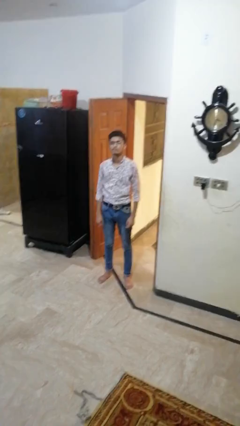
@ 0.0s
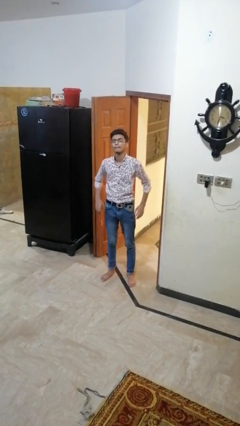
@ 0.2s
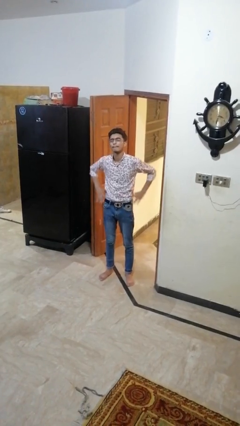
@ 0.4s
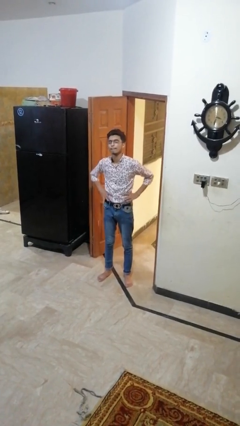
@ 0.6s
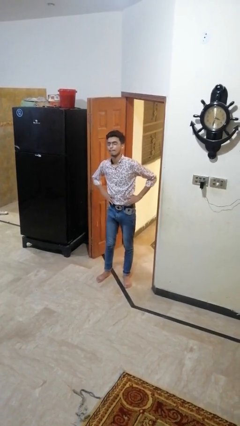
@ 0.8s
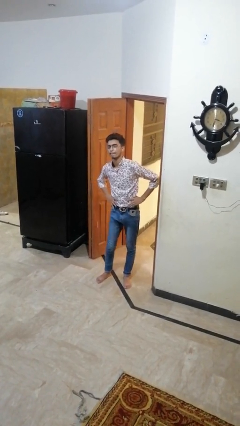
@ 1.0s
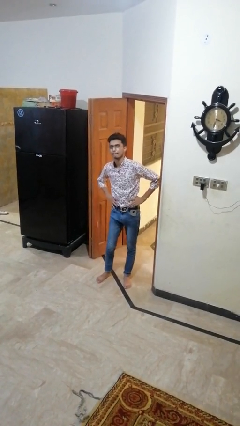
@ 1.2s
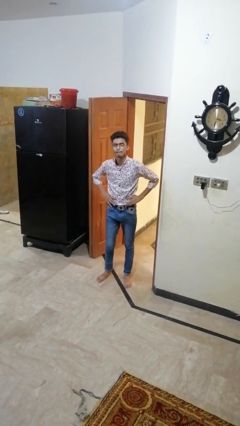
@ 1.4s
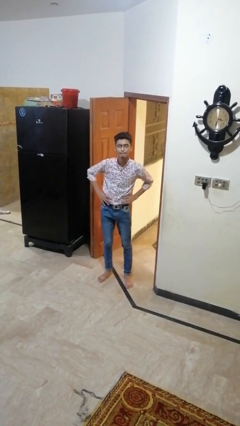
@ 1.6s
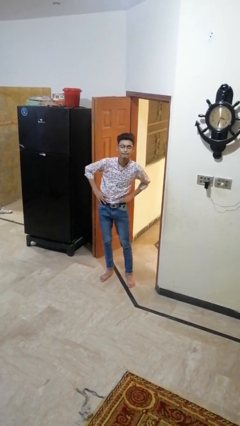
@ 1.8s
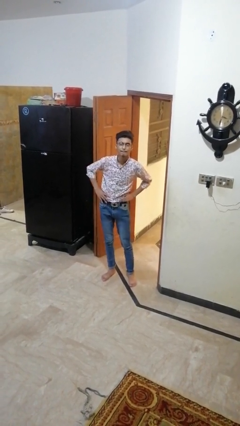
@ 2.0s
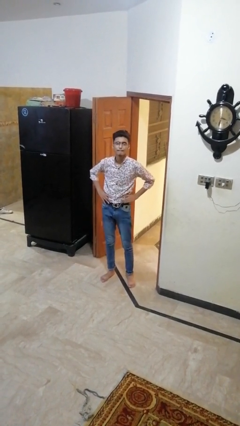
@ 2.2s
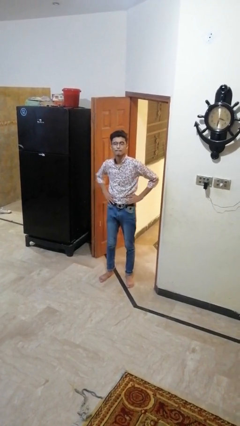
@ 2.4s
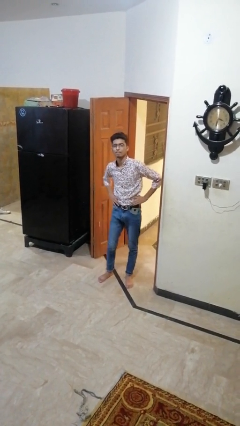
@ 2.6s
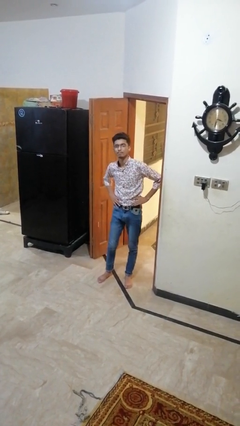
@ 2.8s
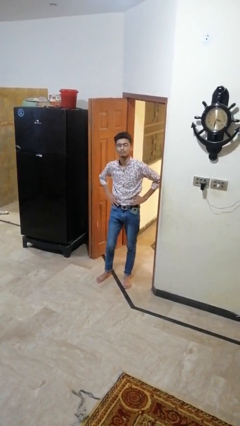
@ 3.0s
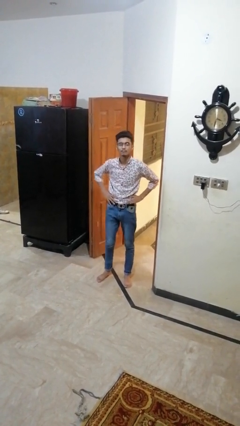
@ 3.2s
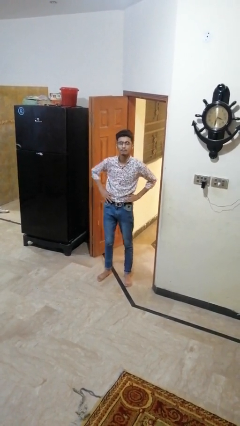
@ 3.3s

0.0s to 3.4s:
person wiggles hips

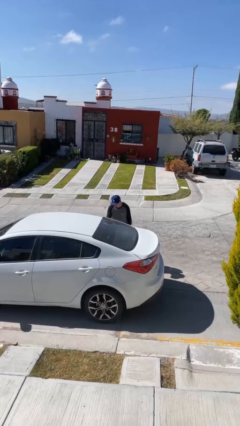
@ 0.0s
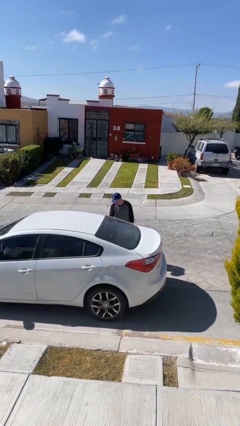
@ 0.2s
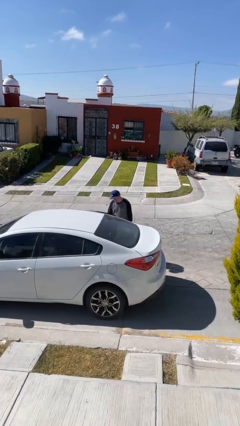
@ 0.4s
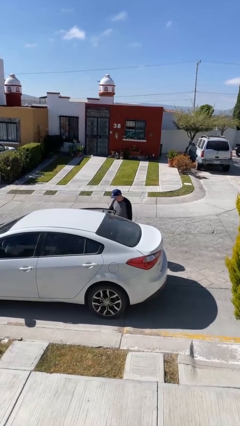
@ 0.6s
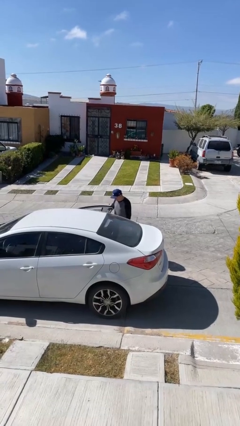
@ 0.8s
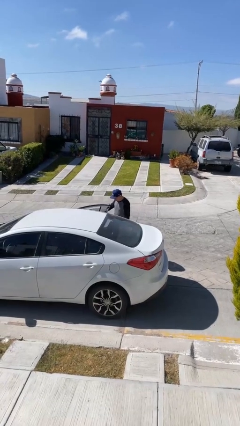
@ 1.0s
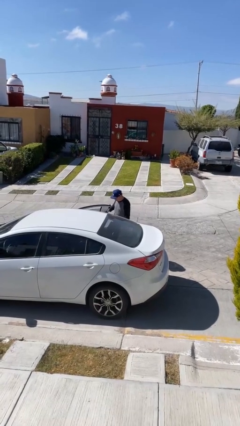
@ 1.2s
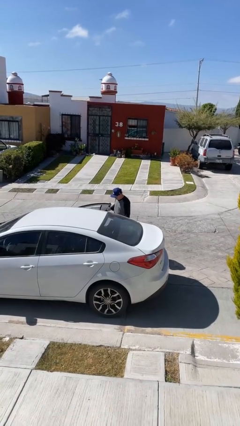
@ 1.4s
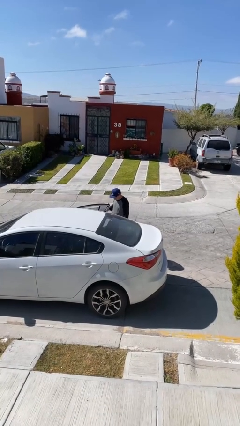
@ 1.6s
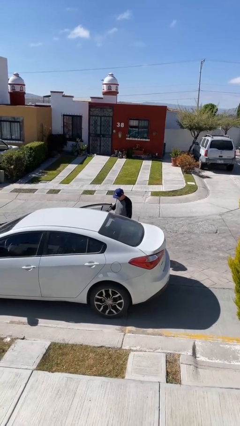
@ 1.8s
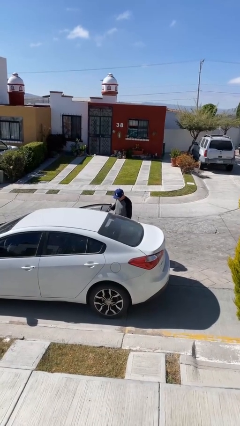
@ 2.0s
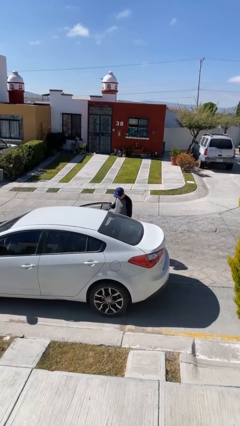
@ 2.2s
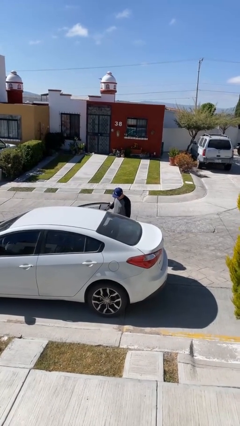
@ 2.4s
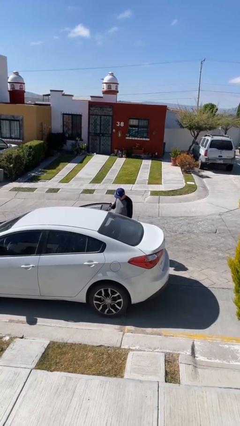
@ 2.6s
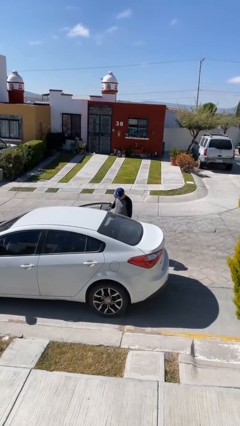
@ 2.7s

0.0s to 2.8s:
person opens car door

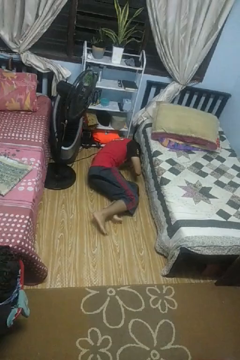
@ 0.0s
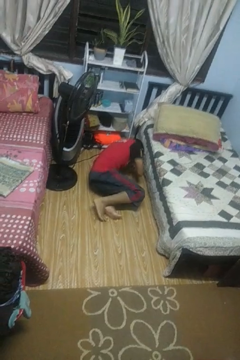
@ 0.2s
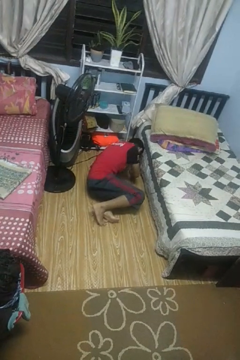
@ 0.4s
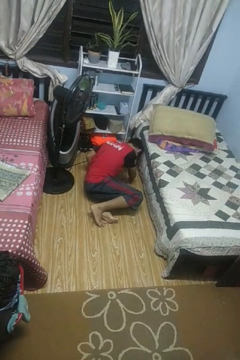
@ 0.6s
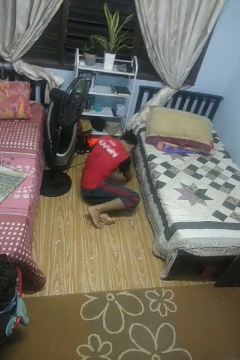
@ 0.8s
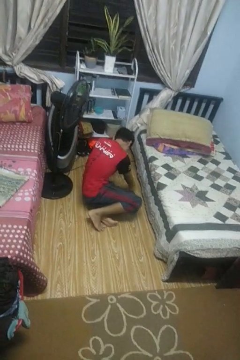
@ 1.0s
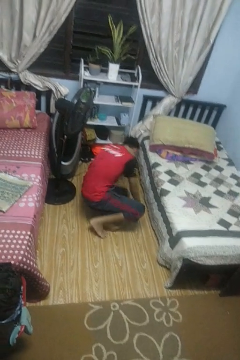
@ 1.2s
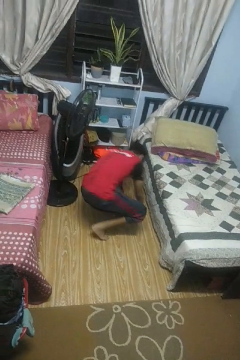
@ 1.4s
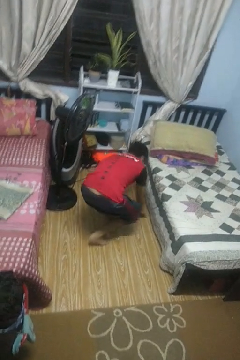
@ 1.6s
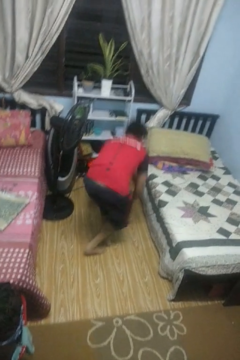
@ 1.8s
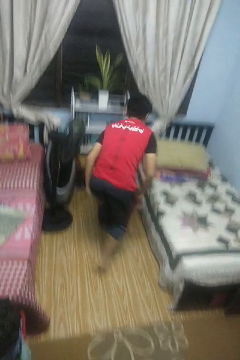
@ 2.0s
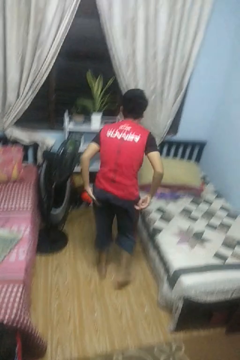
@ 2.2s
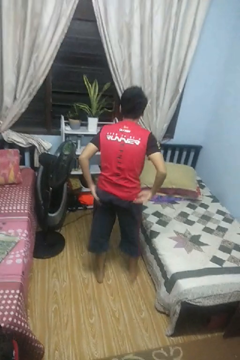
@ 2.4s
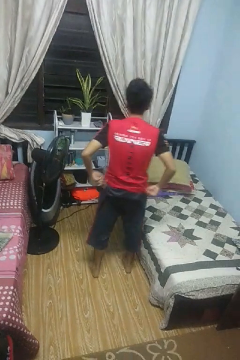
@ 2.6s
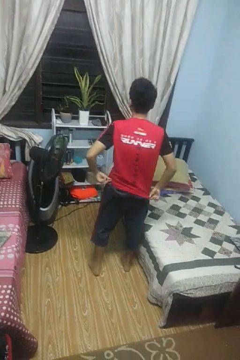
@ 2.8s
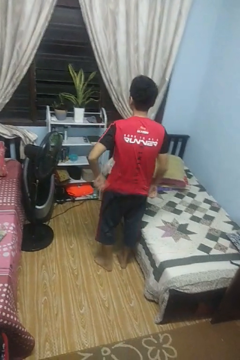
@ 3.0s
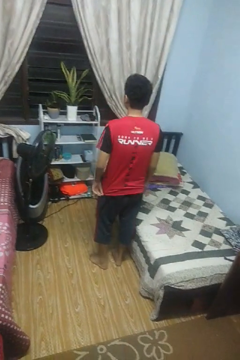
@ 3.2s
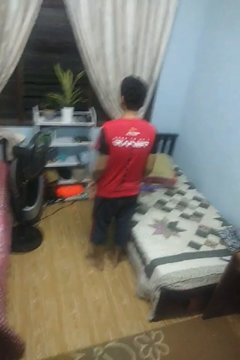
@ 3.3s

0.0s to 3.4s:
person stands up from floor

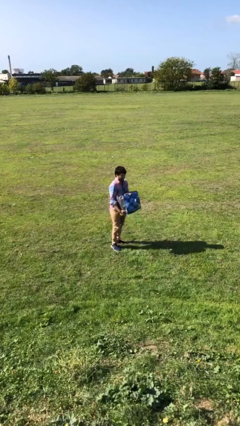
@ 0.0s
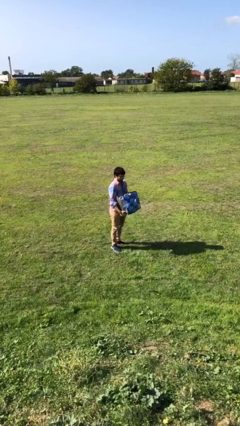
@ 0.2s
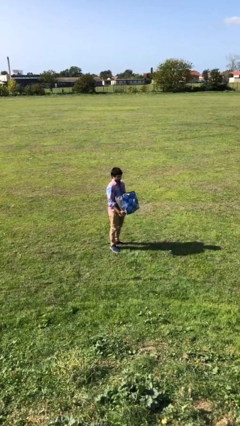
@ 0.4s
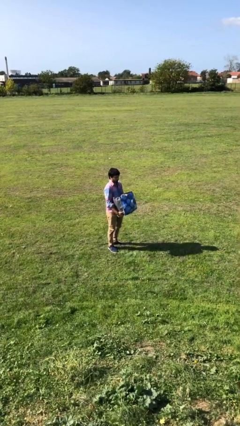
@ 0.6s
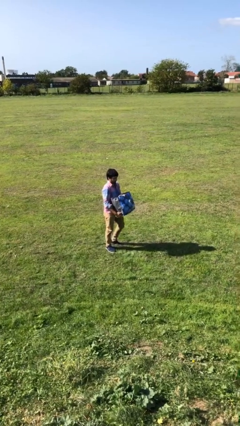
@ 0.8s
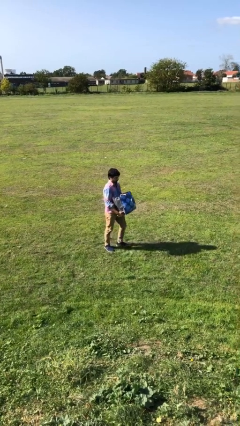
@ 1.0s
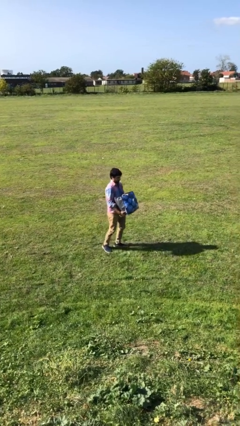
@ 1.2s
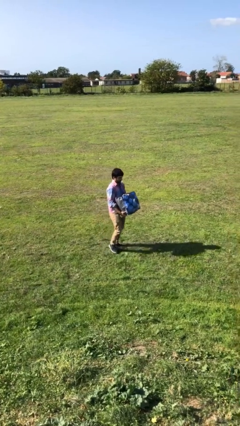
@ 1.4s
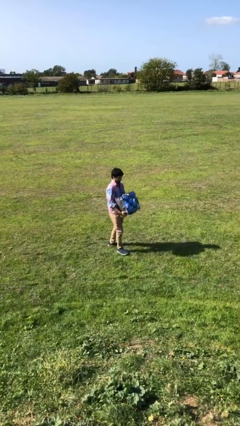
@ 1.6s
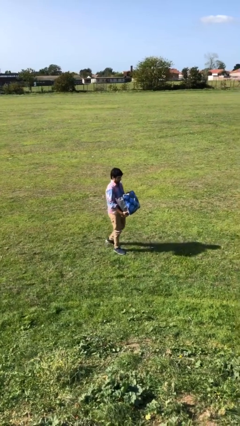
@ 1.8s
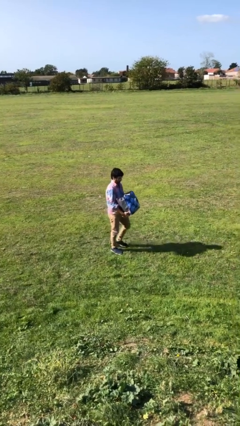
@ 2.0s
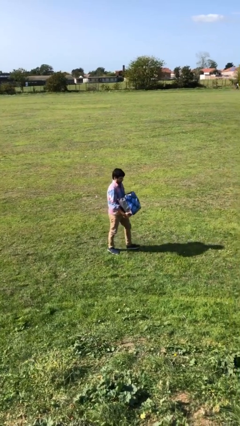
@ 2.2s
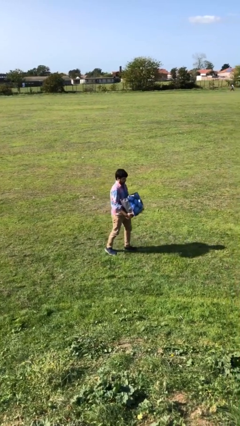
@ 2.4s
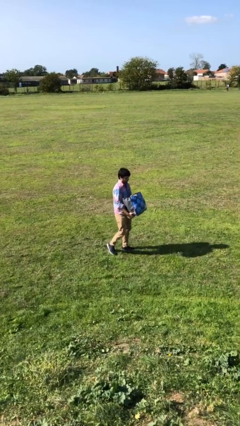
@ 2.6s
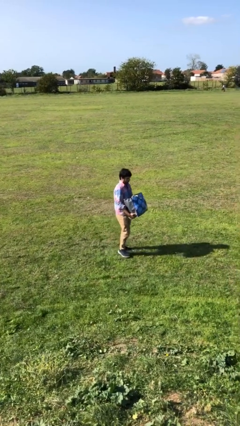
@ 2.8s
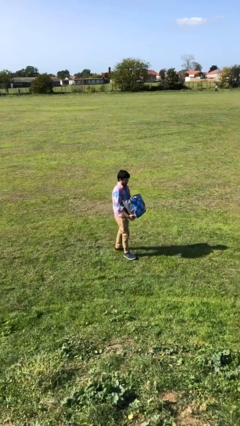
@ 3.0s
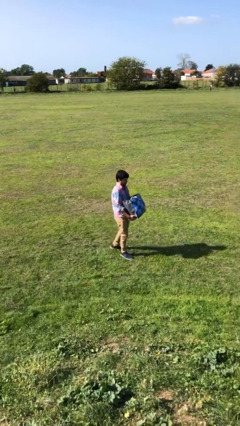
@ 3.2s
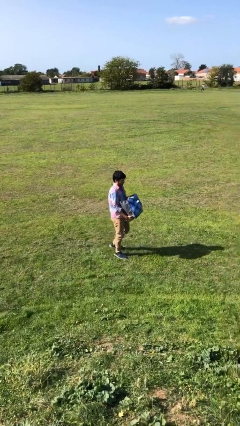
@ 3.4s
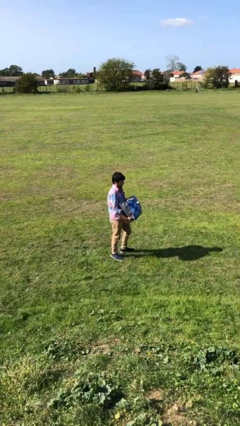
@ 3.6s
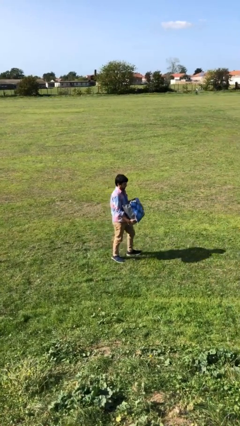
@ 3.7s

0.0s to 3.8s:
person carries heavy object

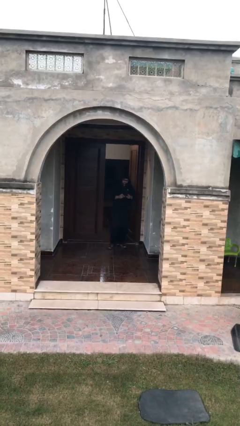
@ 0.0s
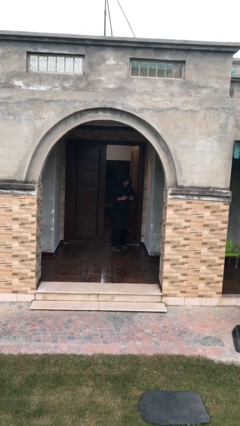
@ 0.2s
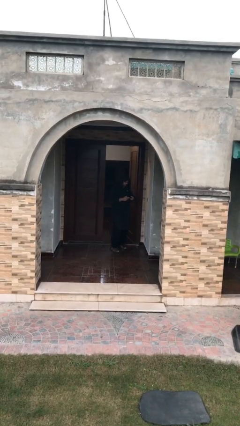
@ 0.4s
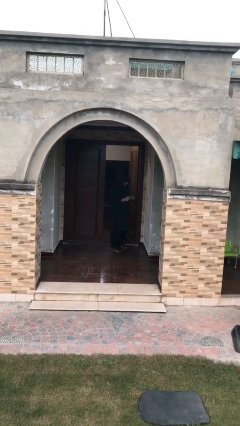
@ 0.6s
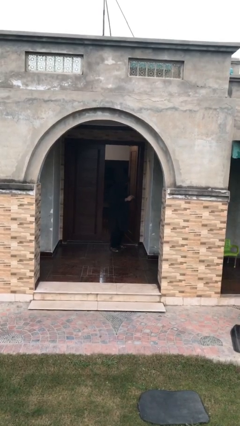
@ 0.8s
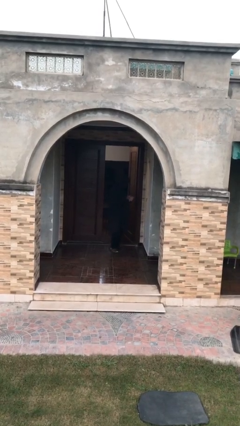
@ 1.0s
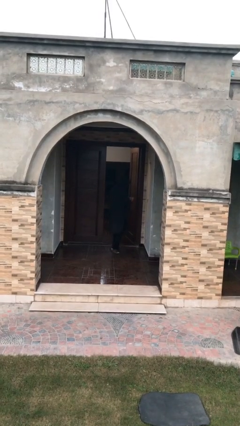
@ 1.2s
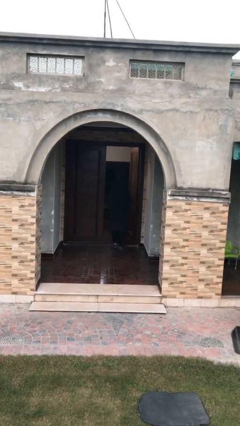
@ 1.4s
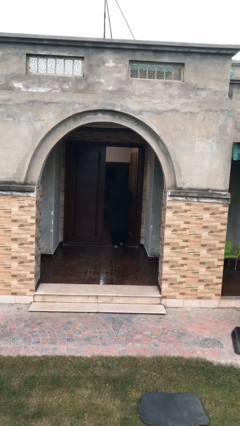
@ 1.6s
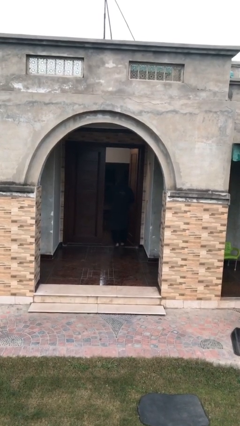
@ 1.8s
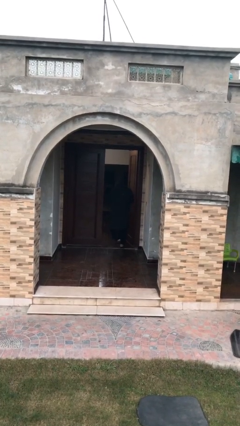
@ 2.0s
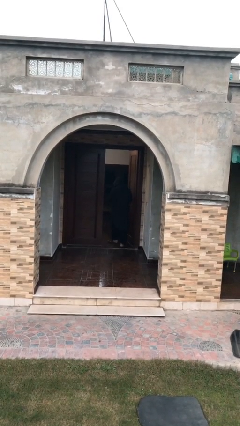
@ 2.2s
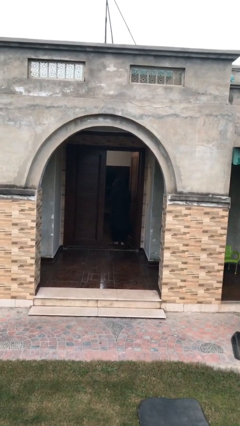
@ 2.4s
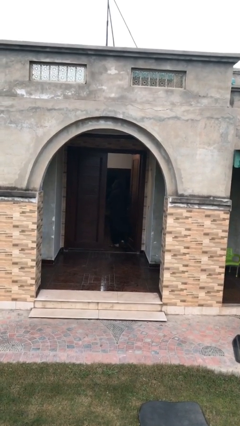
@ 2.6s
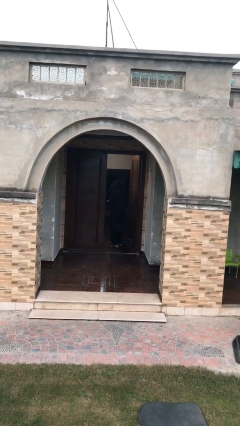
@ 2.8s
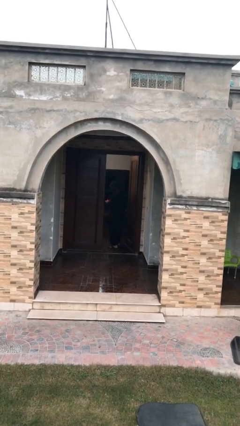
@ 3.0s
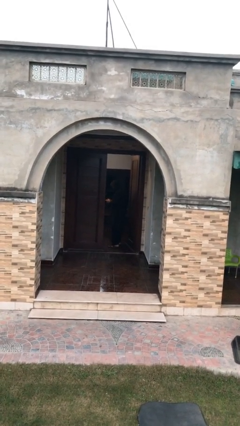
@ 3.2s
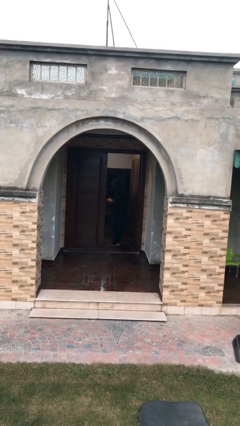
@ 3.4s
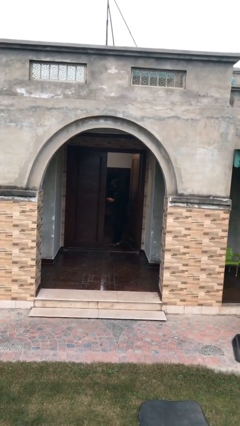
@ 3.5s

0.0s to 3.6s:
person exits scene through structure

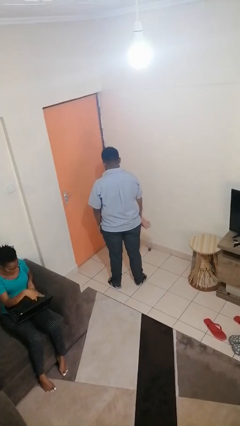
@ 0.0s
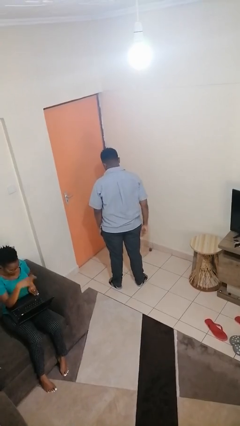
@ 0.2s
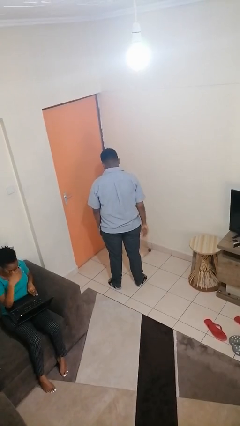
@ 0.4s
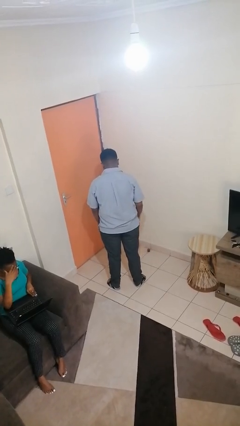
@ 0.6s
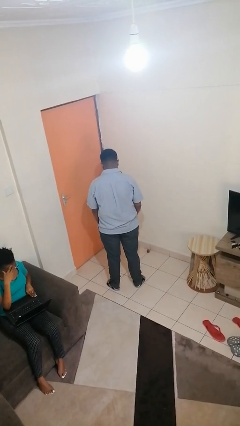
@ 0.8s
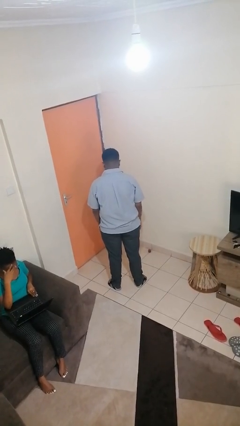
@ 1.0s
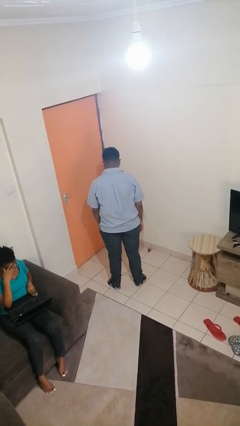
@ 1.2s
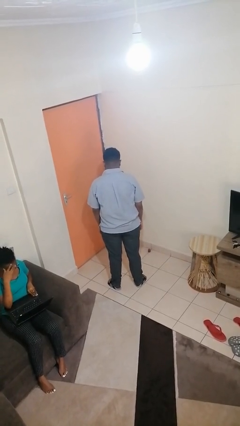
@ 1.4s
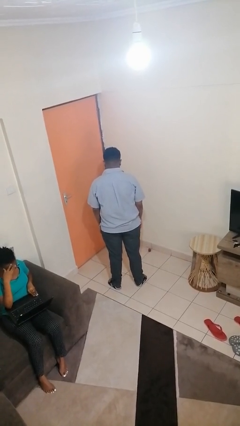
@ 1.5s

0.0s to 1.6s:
person gestures come here
